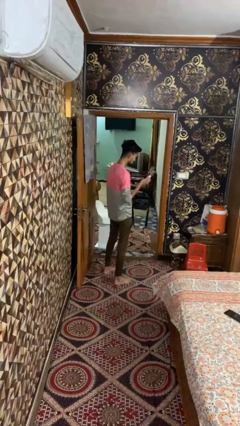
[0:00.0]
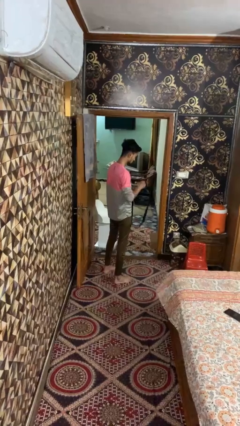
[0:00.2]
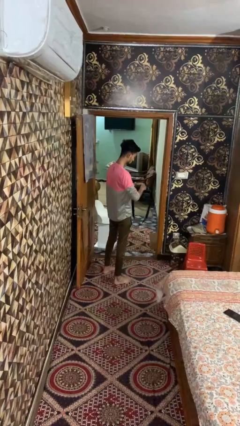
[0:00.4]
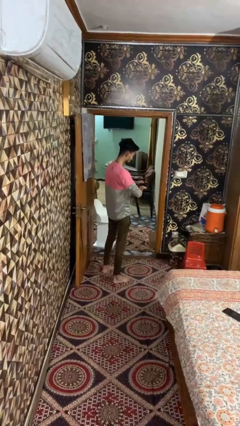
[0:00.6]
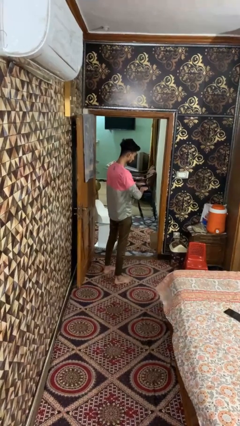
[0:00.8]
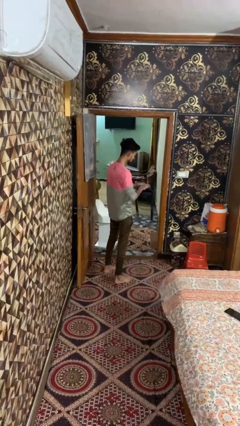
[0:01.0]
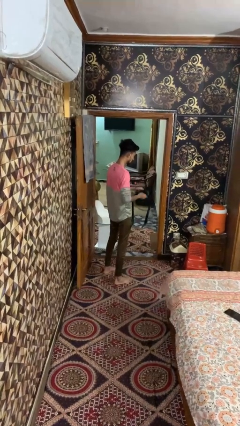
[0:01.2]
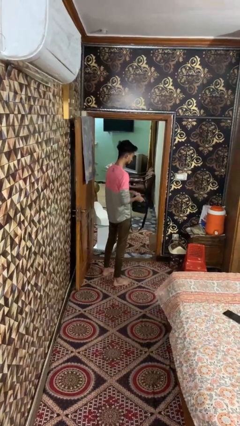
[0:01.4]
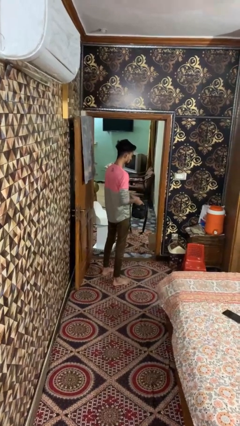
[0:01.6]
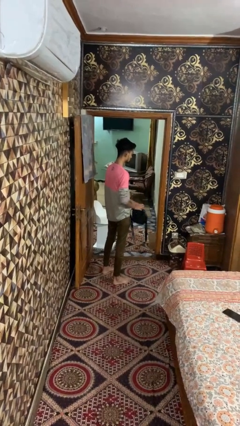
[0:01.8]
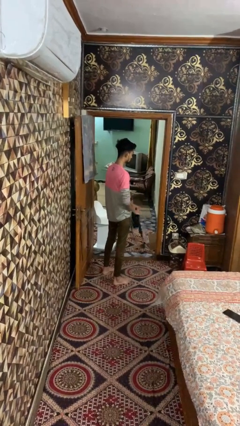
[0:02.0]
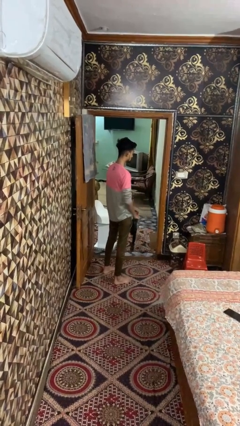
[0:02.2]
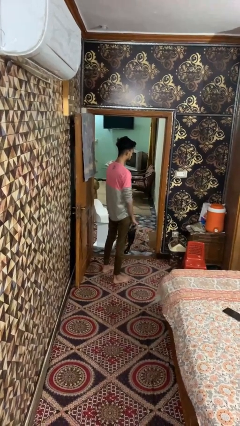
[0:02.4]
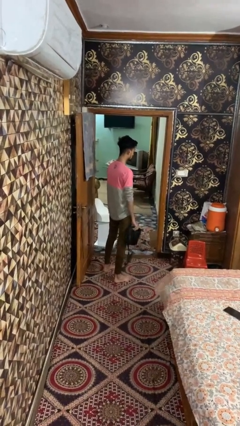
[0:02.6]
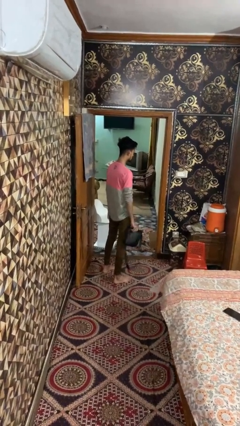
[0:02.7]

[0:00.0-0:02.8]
person puts object into bag

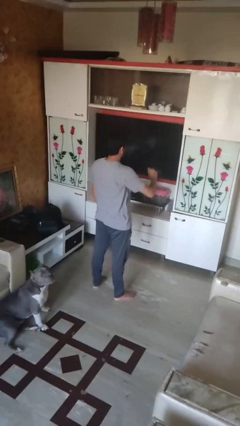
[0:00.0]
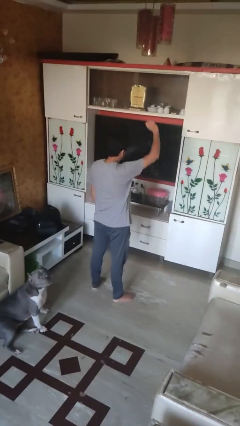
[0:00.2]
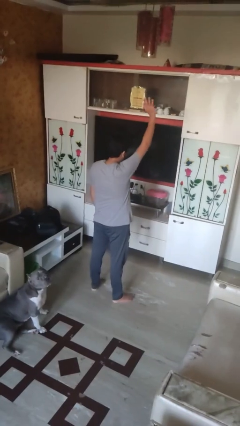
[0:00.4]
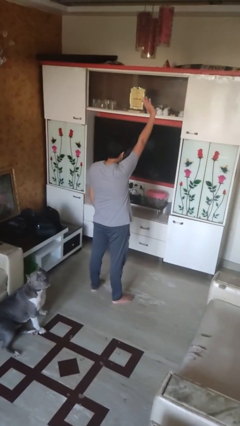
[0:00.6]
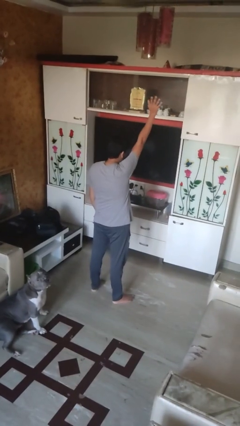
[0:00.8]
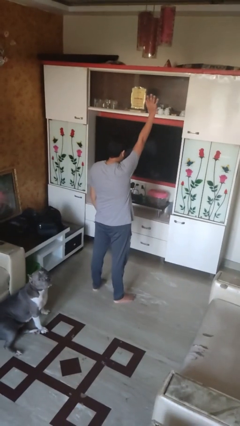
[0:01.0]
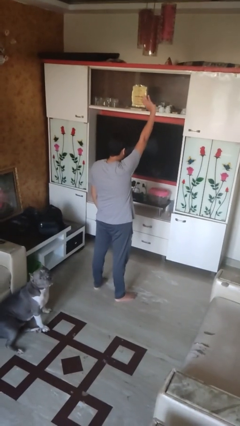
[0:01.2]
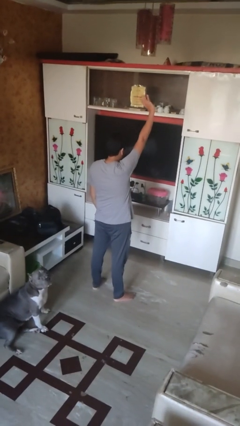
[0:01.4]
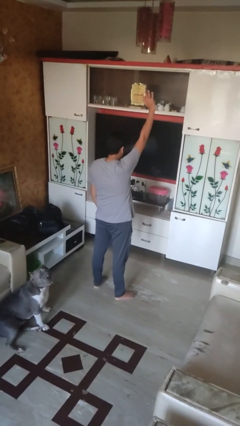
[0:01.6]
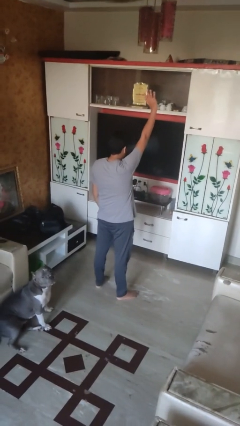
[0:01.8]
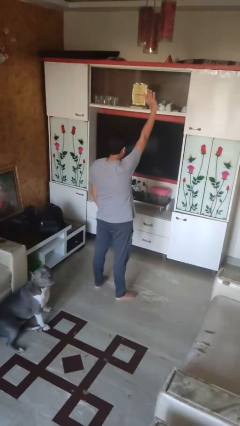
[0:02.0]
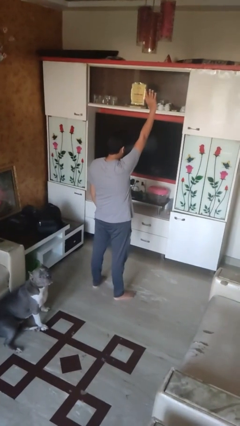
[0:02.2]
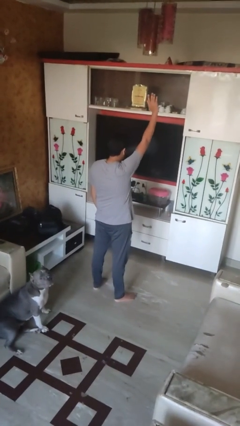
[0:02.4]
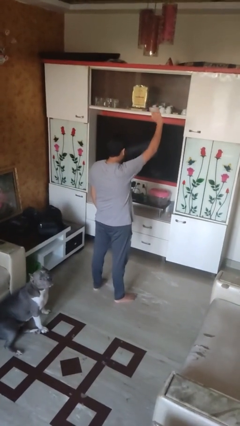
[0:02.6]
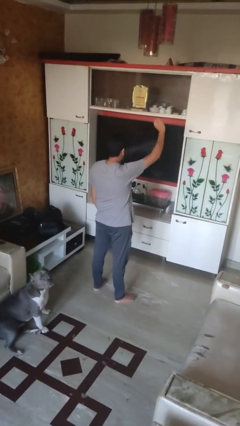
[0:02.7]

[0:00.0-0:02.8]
person waves at person

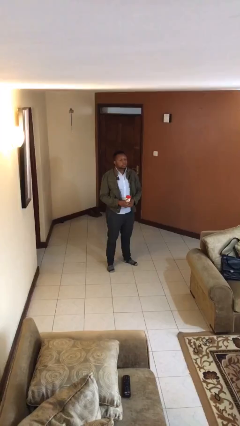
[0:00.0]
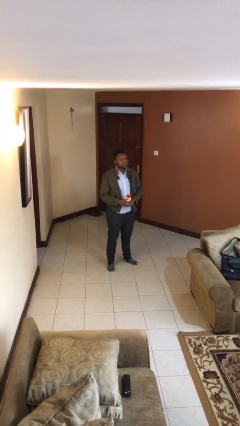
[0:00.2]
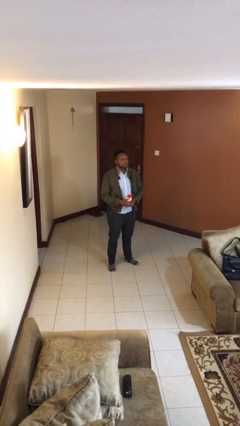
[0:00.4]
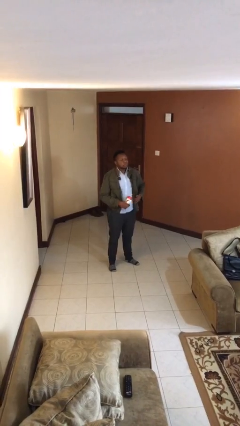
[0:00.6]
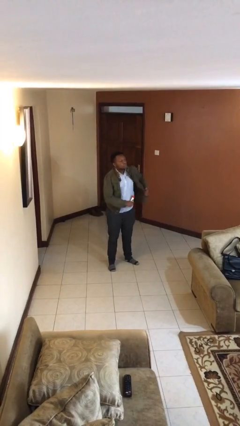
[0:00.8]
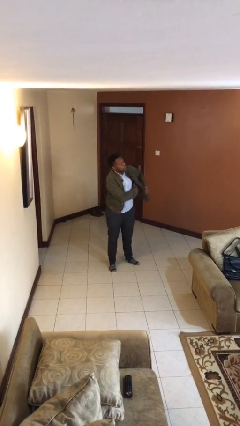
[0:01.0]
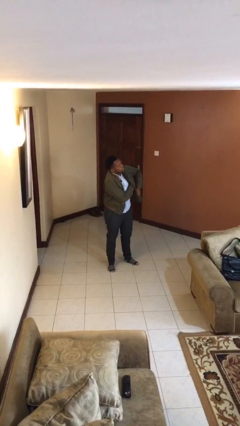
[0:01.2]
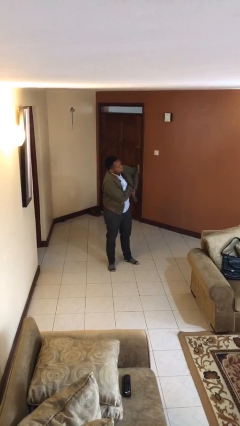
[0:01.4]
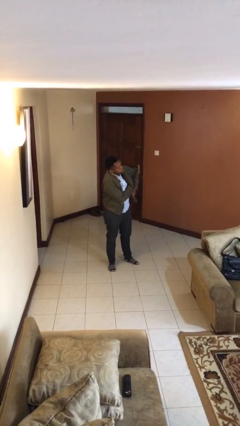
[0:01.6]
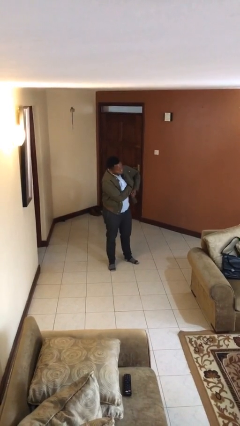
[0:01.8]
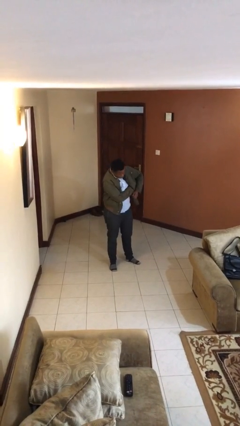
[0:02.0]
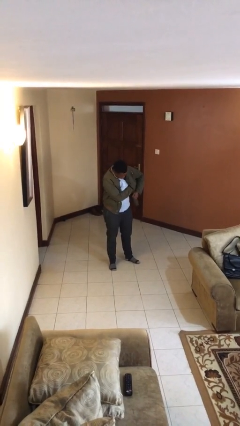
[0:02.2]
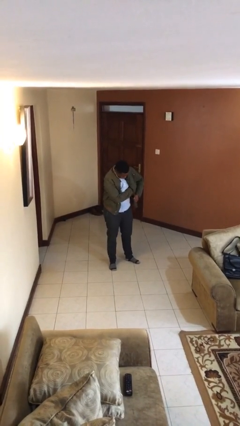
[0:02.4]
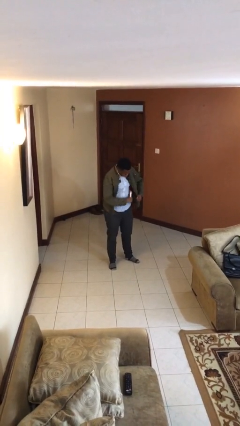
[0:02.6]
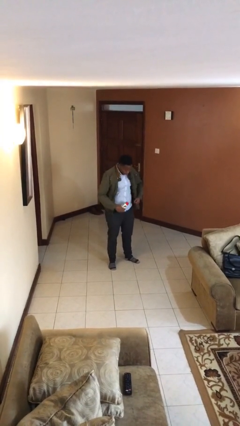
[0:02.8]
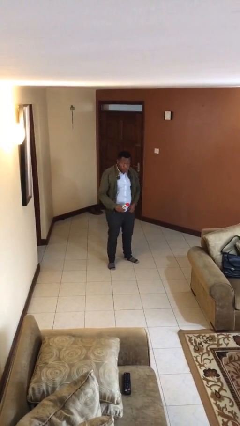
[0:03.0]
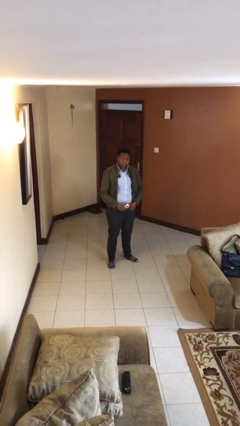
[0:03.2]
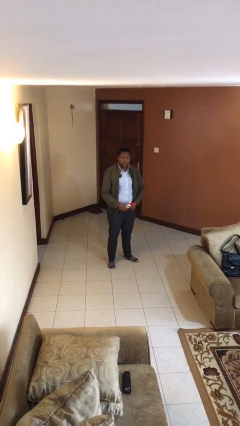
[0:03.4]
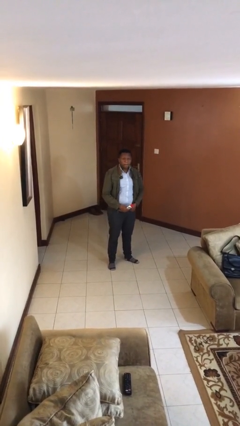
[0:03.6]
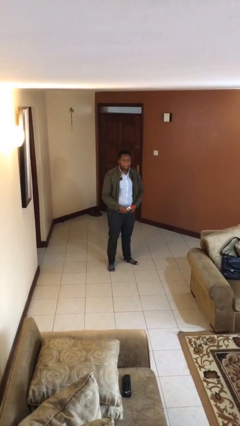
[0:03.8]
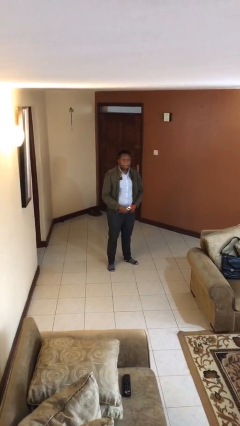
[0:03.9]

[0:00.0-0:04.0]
person applies deodorant

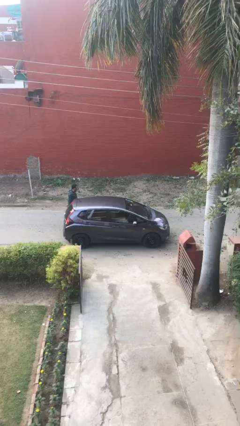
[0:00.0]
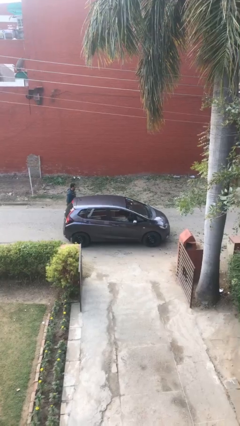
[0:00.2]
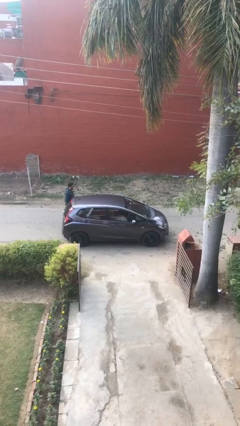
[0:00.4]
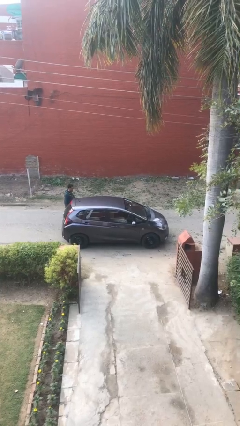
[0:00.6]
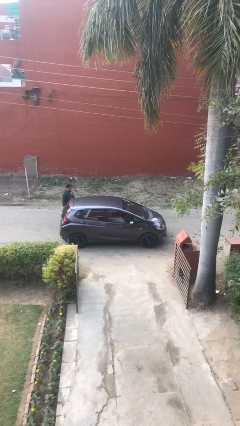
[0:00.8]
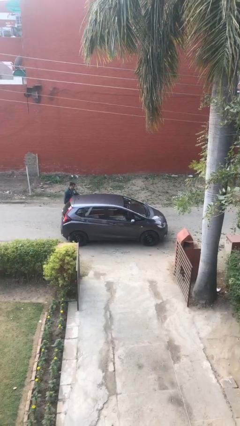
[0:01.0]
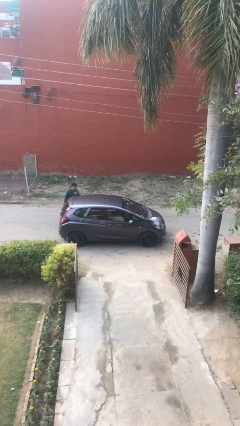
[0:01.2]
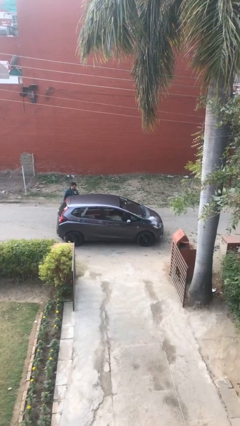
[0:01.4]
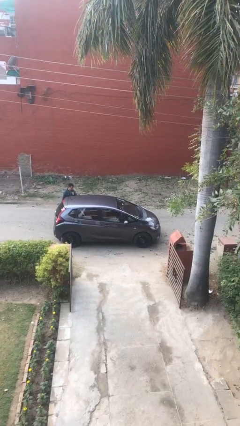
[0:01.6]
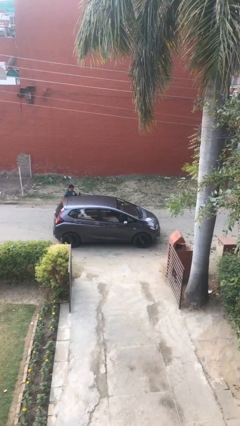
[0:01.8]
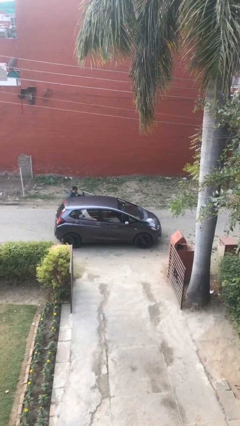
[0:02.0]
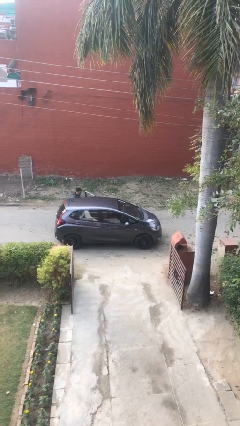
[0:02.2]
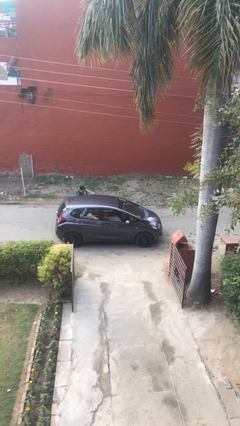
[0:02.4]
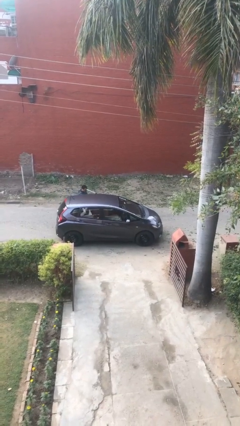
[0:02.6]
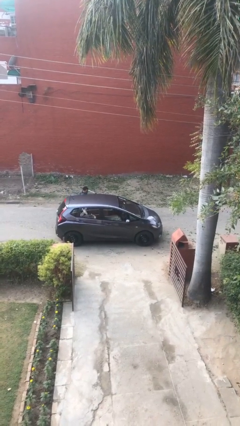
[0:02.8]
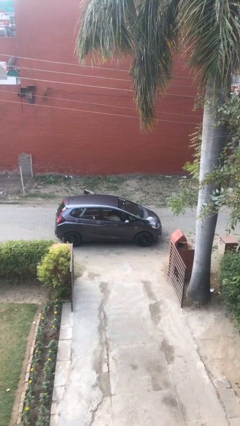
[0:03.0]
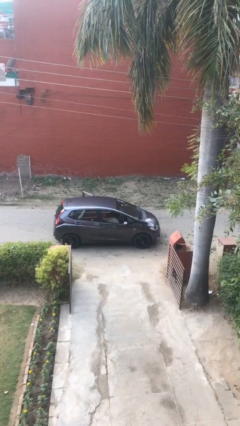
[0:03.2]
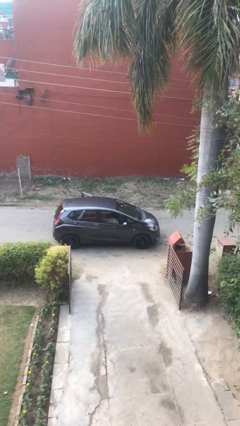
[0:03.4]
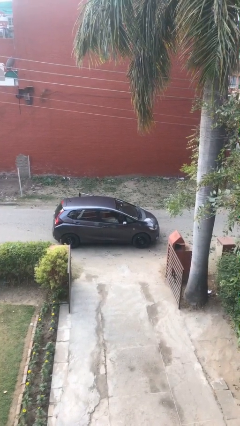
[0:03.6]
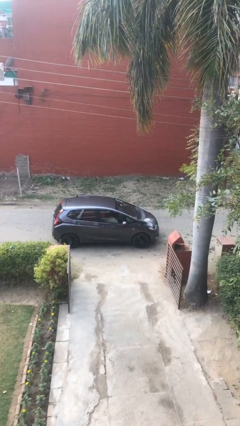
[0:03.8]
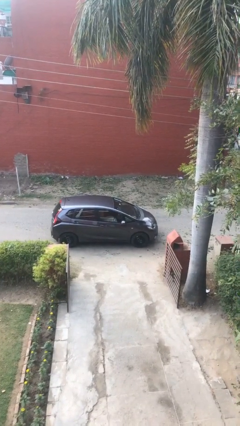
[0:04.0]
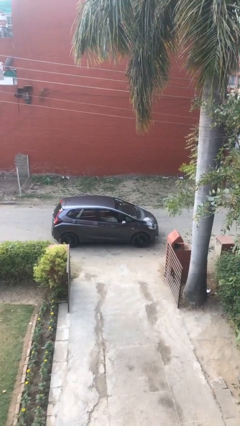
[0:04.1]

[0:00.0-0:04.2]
car picks up person

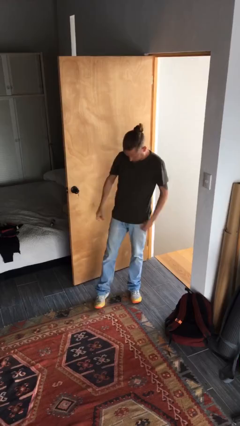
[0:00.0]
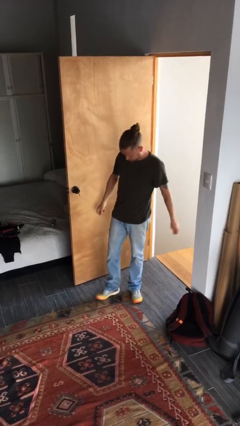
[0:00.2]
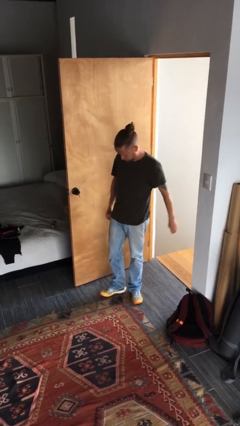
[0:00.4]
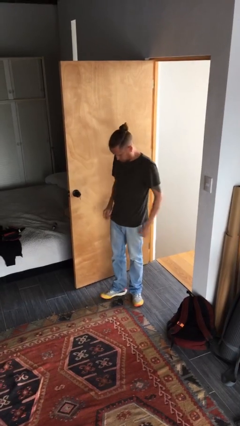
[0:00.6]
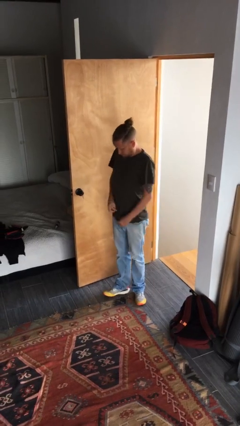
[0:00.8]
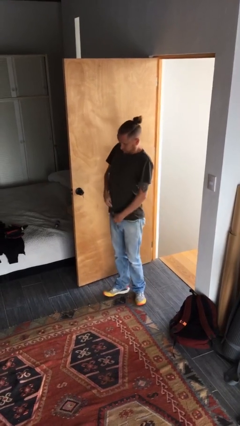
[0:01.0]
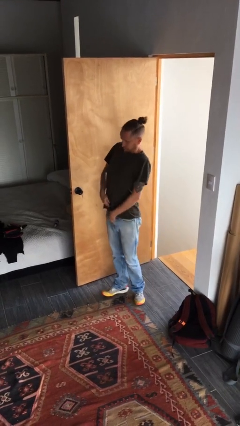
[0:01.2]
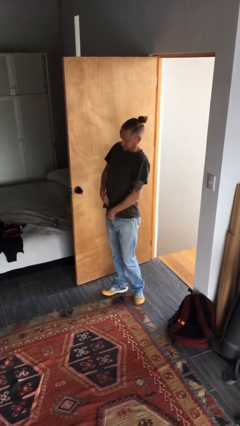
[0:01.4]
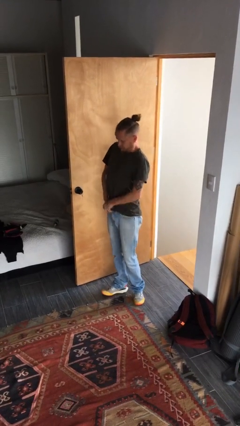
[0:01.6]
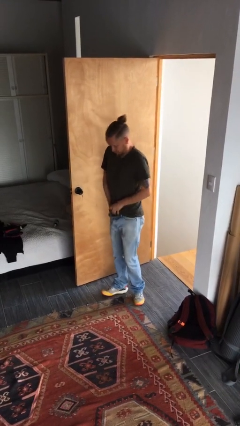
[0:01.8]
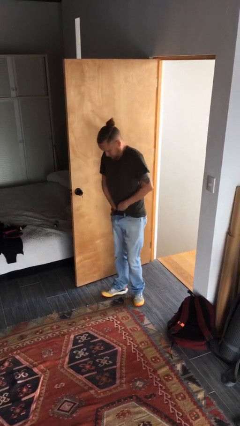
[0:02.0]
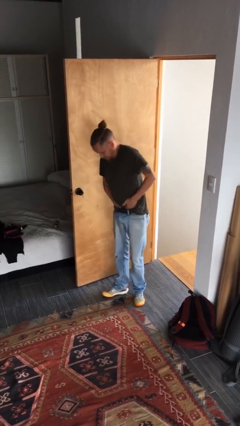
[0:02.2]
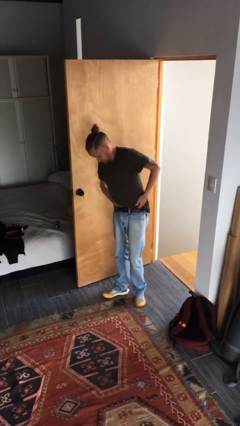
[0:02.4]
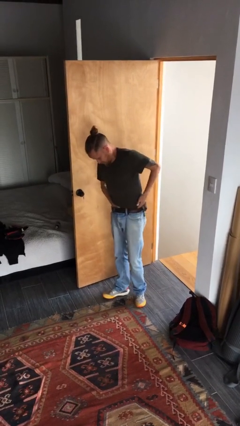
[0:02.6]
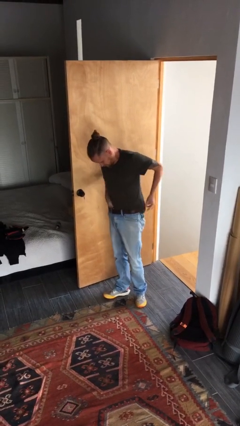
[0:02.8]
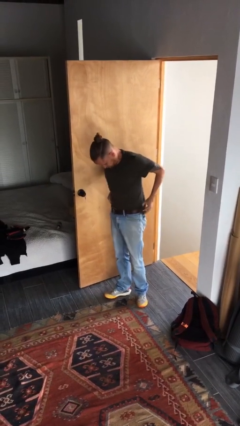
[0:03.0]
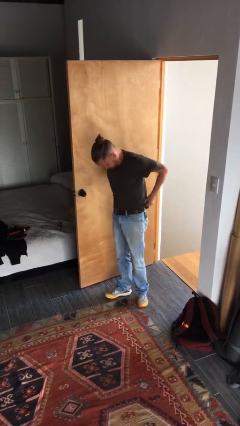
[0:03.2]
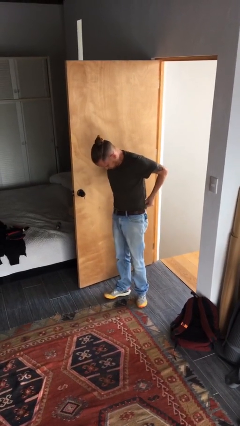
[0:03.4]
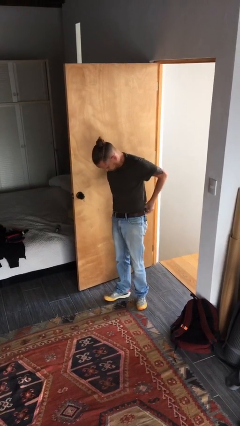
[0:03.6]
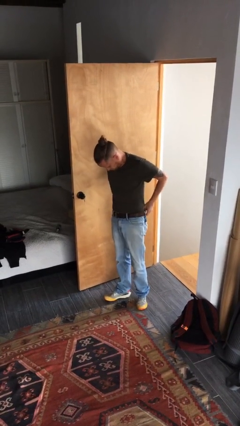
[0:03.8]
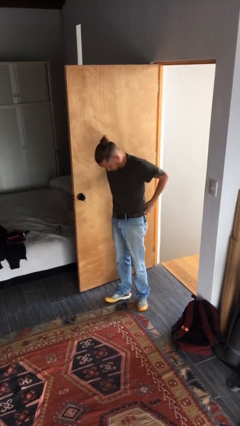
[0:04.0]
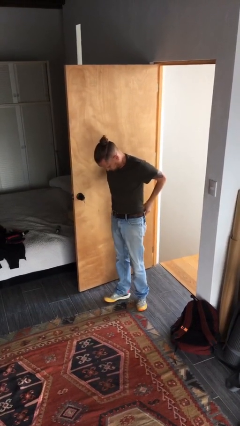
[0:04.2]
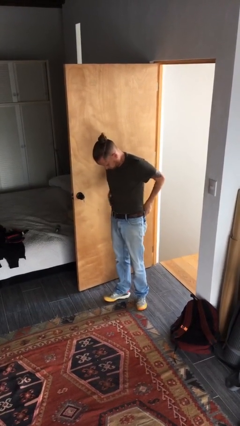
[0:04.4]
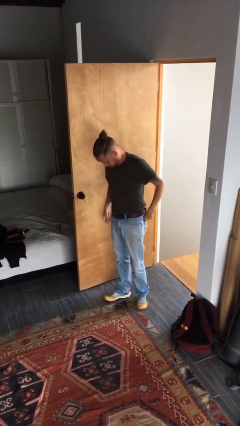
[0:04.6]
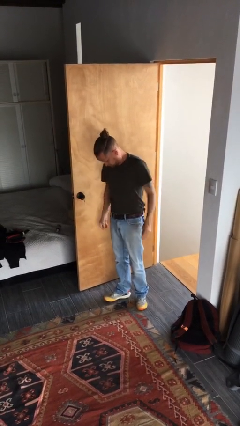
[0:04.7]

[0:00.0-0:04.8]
person tucks in shirt
